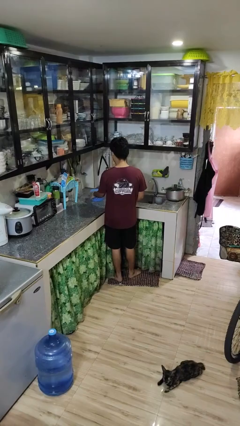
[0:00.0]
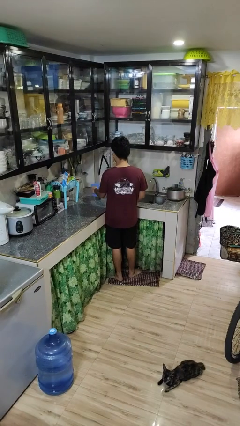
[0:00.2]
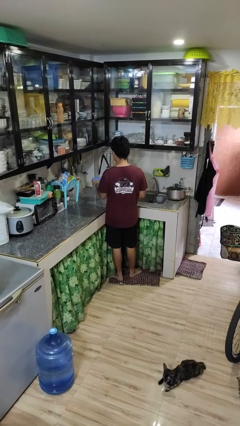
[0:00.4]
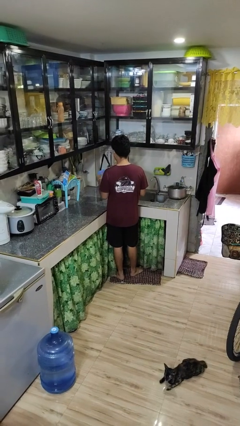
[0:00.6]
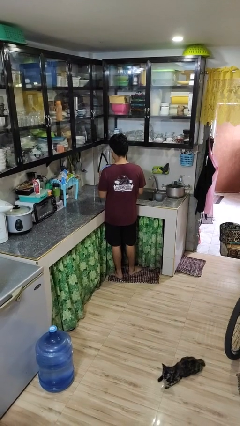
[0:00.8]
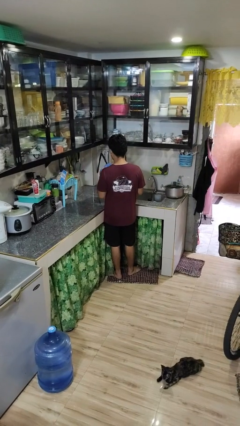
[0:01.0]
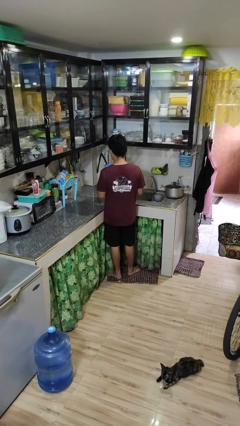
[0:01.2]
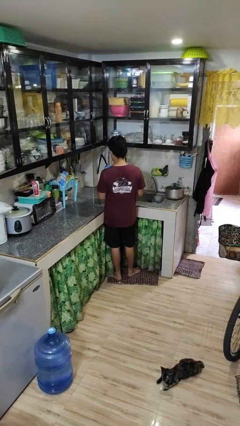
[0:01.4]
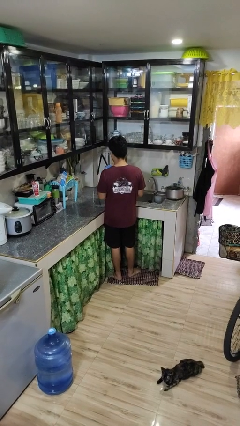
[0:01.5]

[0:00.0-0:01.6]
person picks up object from countertop

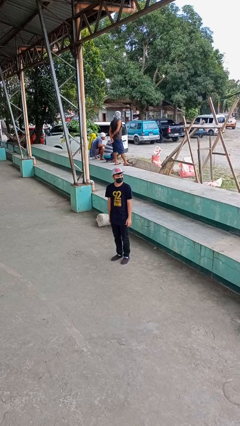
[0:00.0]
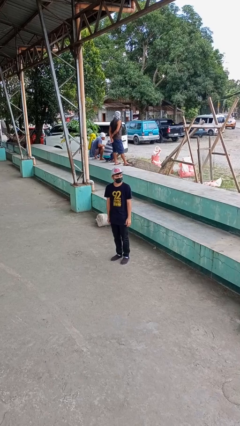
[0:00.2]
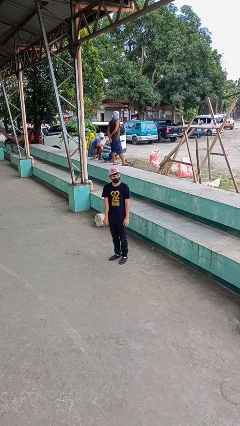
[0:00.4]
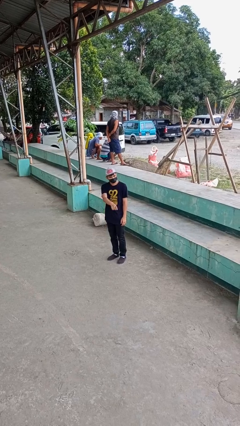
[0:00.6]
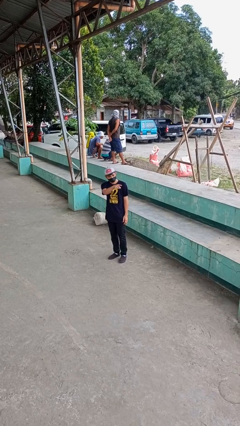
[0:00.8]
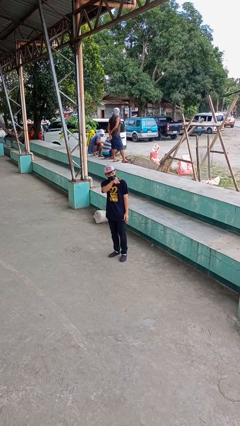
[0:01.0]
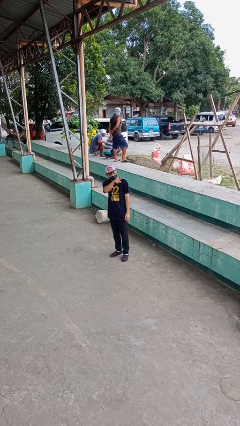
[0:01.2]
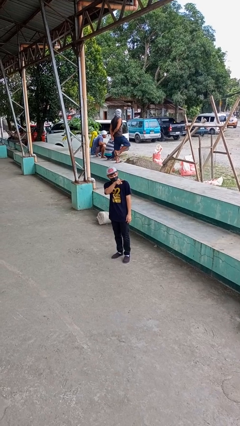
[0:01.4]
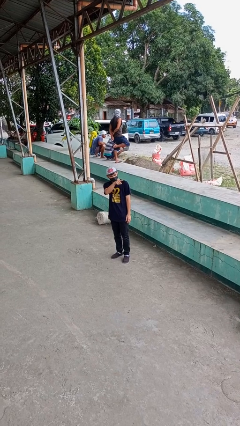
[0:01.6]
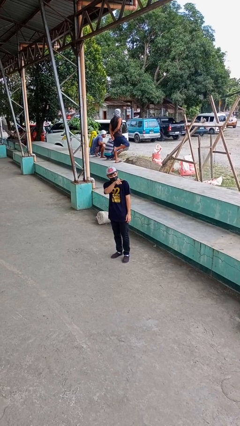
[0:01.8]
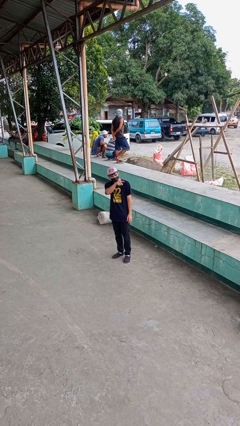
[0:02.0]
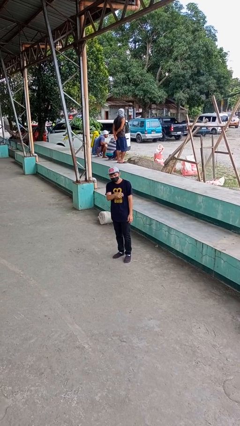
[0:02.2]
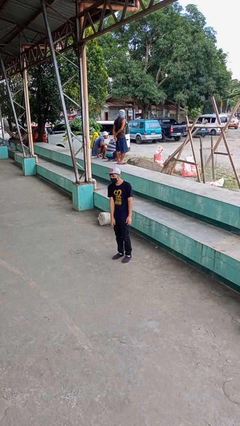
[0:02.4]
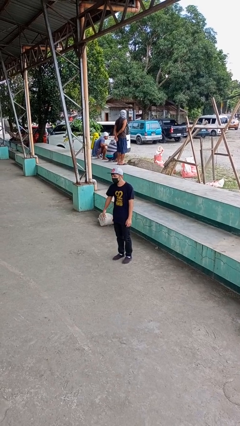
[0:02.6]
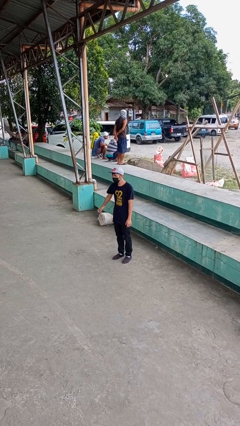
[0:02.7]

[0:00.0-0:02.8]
person points at person

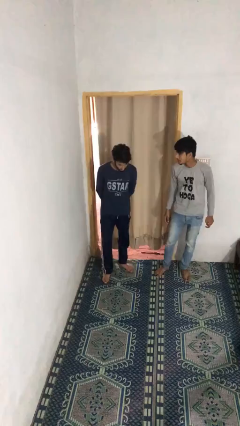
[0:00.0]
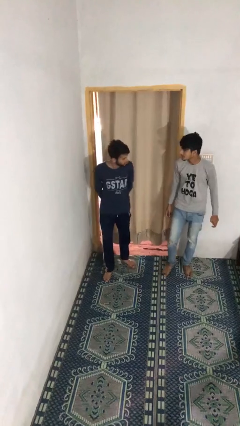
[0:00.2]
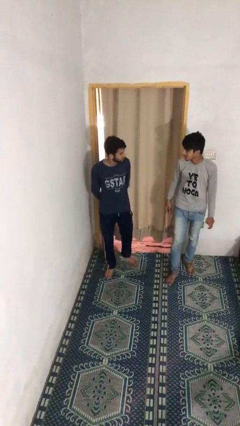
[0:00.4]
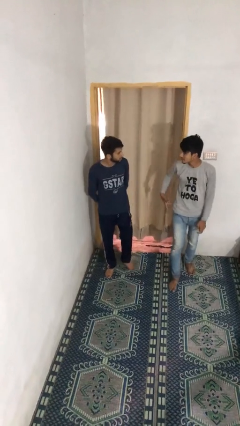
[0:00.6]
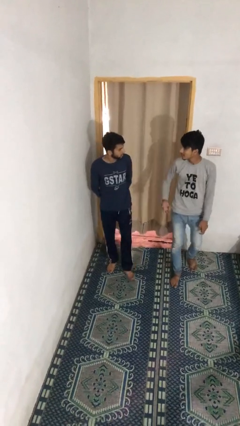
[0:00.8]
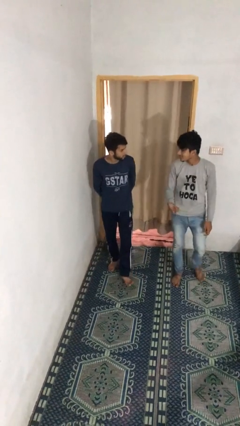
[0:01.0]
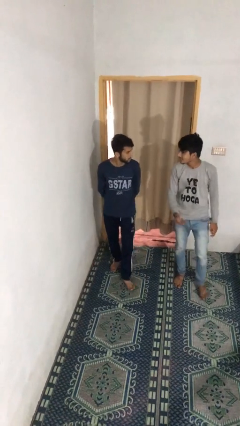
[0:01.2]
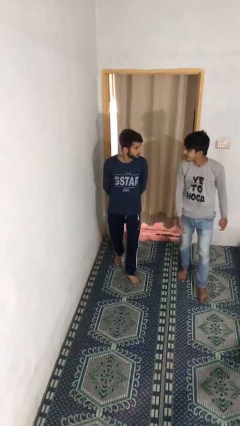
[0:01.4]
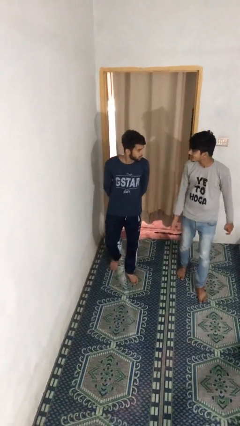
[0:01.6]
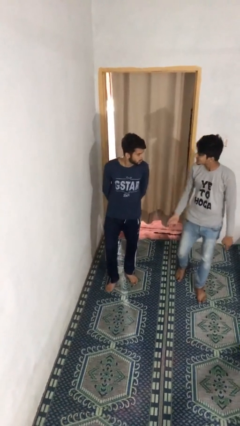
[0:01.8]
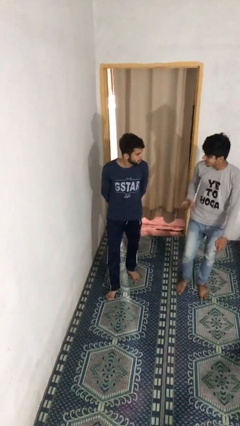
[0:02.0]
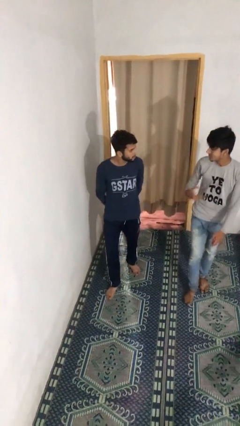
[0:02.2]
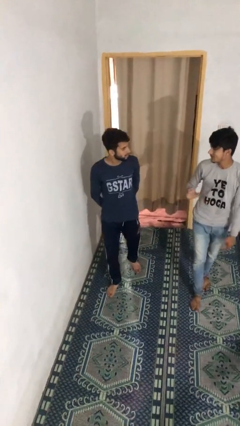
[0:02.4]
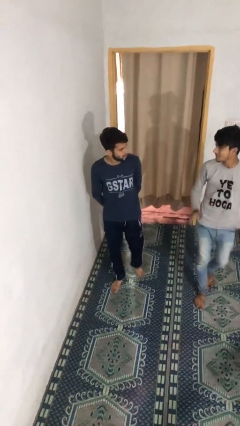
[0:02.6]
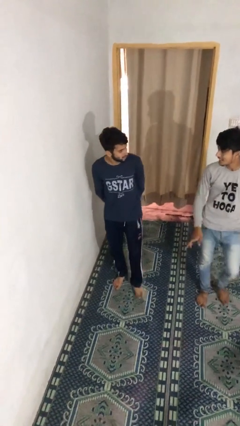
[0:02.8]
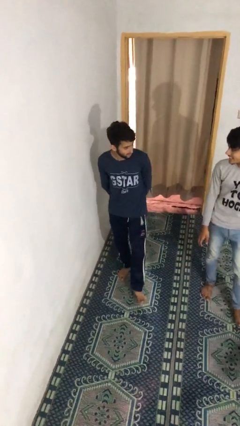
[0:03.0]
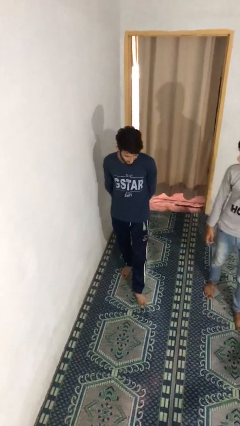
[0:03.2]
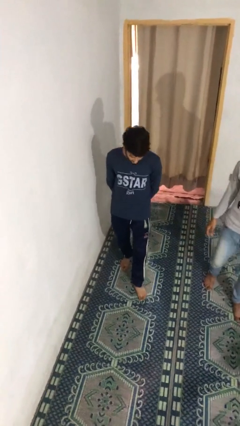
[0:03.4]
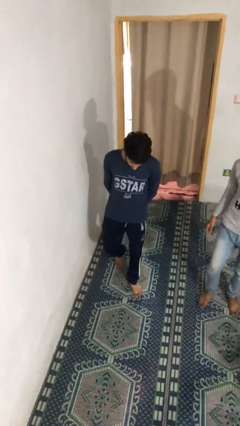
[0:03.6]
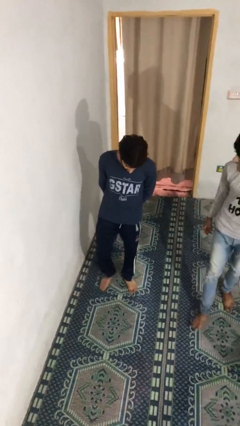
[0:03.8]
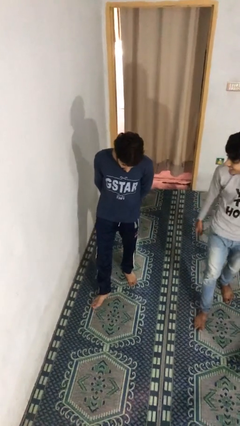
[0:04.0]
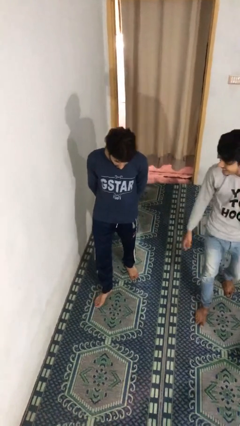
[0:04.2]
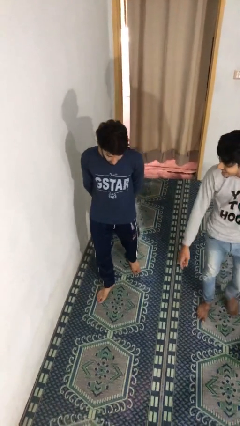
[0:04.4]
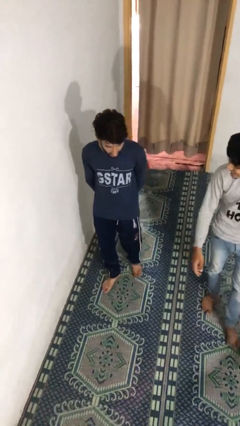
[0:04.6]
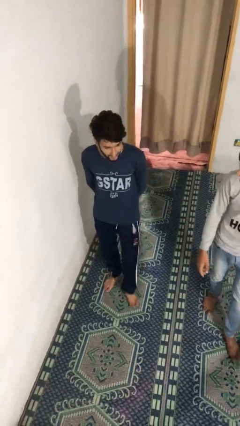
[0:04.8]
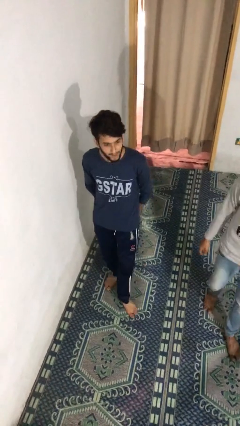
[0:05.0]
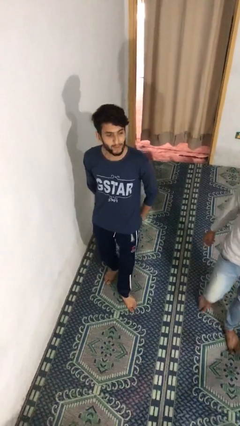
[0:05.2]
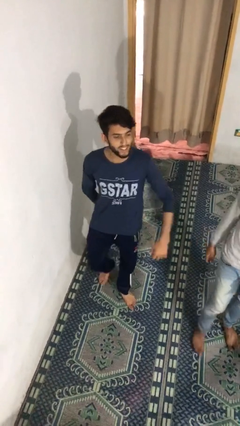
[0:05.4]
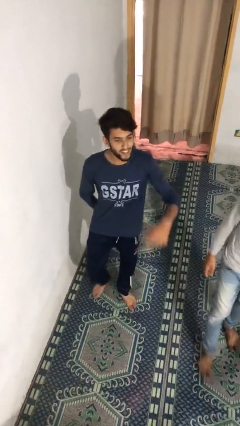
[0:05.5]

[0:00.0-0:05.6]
person talks to person

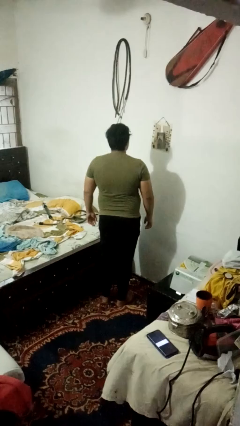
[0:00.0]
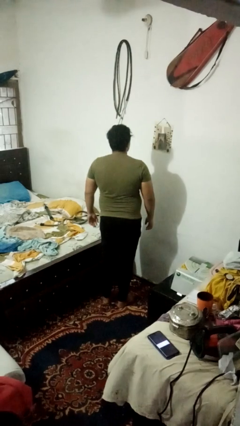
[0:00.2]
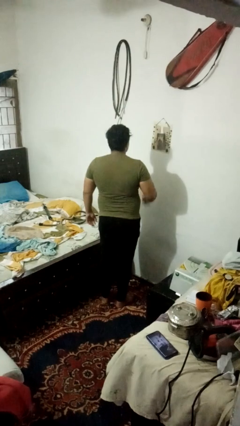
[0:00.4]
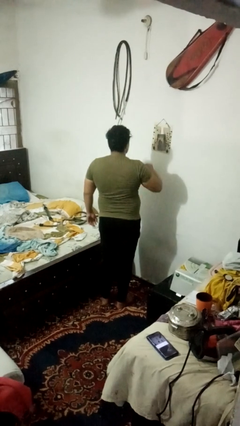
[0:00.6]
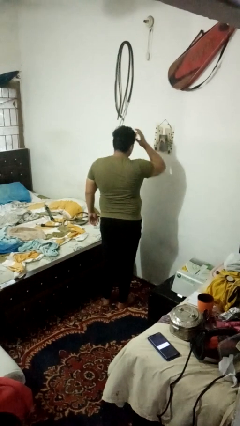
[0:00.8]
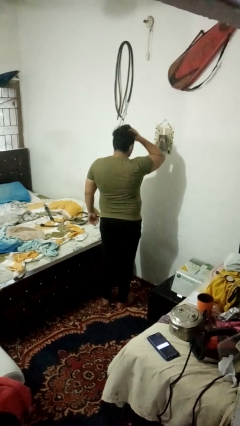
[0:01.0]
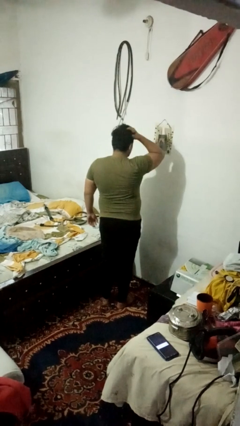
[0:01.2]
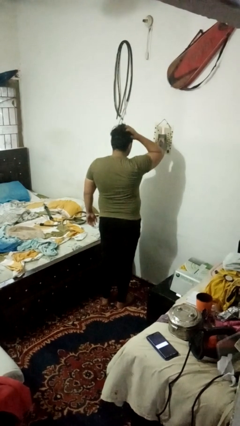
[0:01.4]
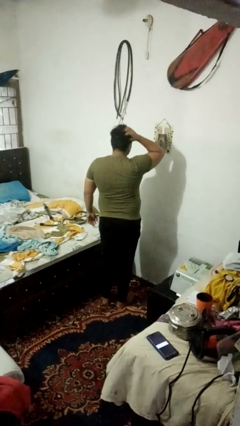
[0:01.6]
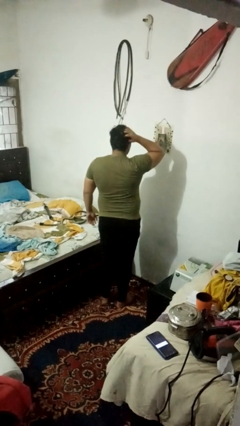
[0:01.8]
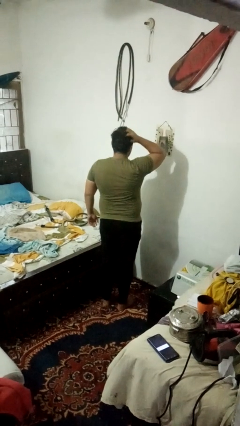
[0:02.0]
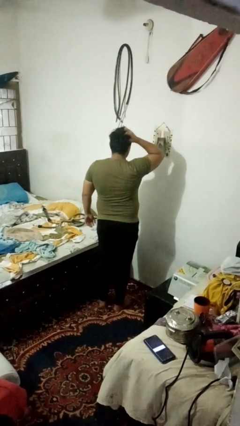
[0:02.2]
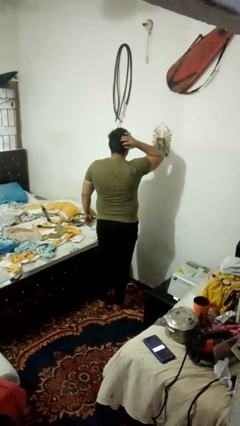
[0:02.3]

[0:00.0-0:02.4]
person strokes hair

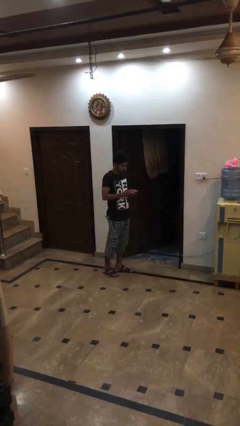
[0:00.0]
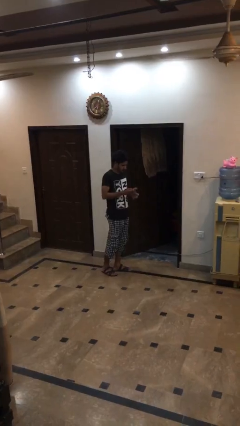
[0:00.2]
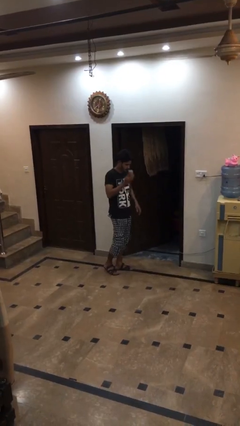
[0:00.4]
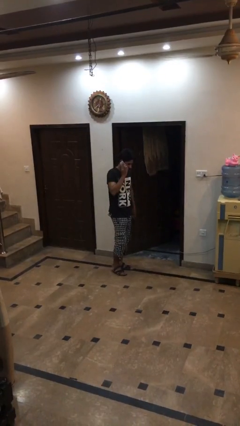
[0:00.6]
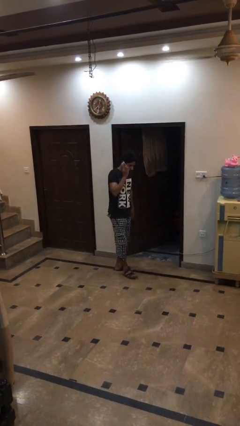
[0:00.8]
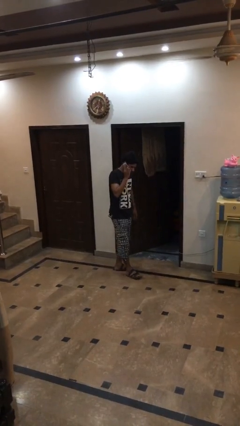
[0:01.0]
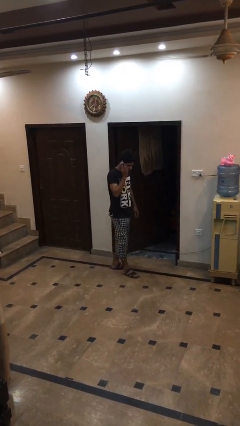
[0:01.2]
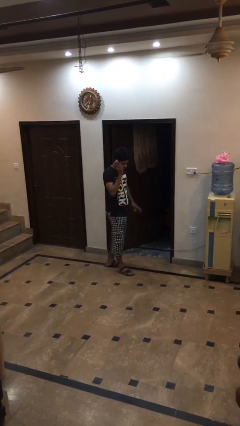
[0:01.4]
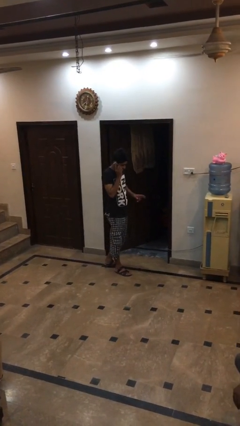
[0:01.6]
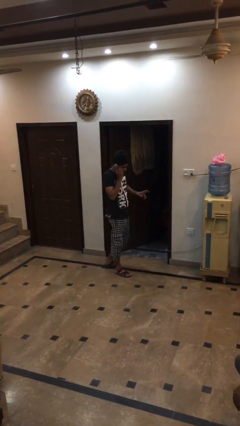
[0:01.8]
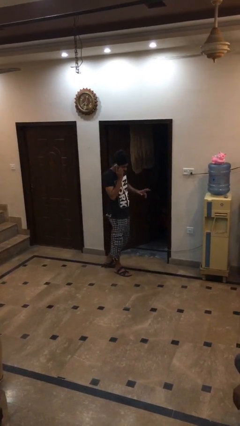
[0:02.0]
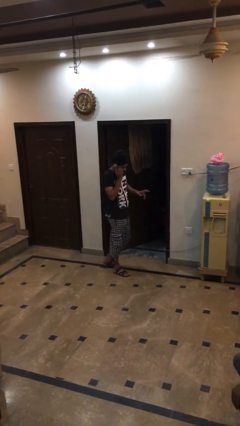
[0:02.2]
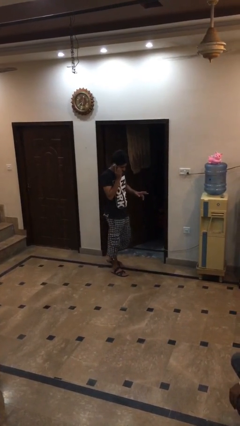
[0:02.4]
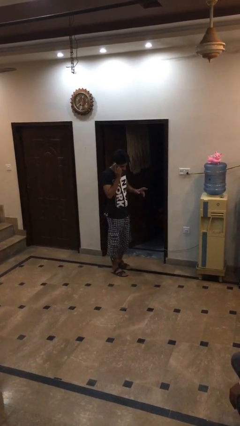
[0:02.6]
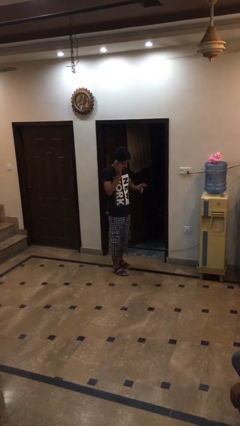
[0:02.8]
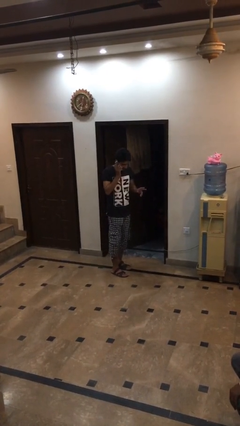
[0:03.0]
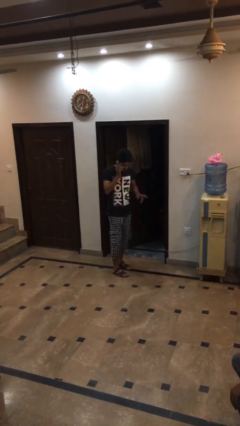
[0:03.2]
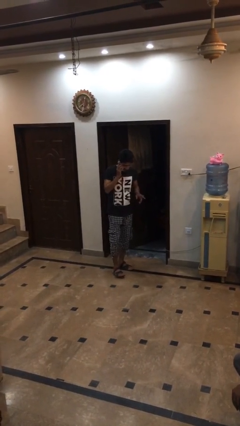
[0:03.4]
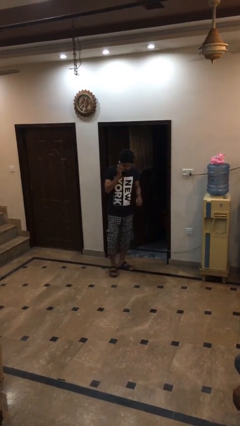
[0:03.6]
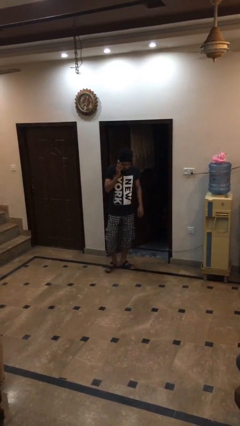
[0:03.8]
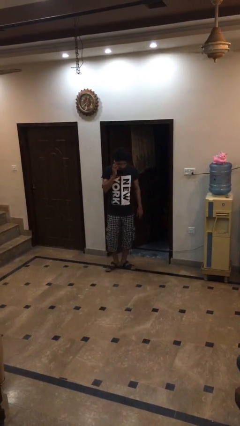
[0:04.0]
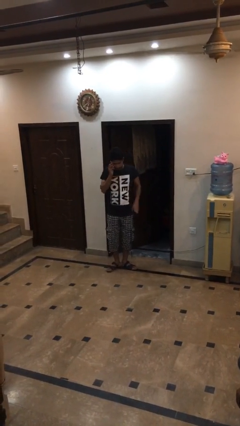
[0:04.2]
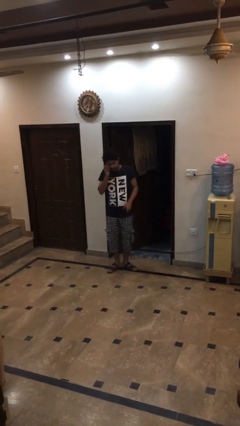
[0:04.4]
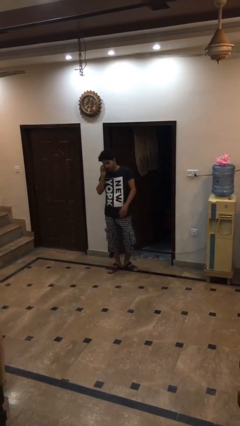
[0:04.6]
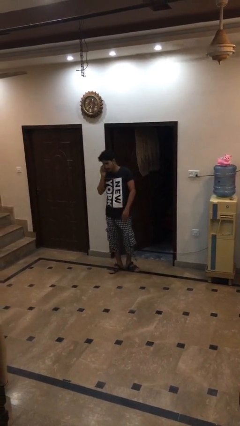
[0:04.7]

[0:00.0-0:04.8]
person talks on phone

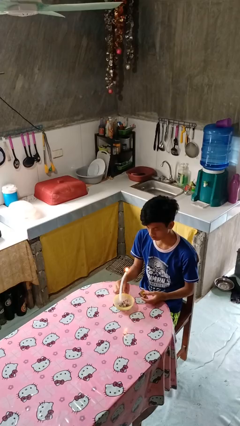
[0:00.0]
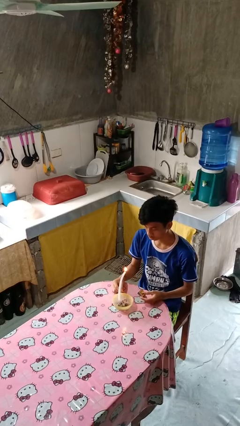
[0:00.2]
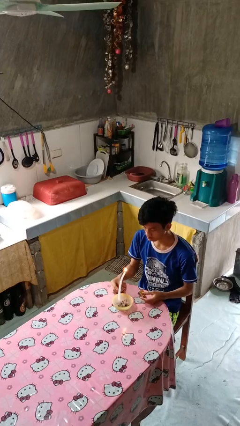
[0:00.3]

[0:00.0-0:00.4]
person extinguishes candle
